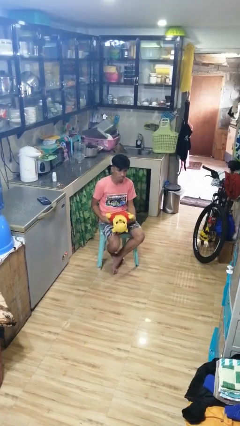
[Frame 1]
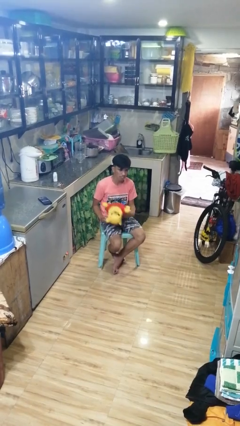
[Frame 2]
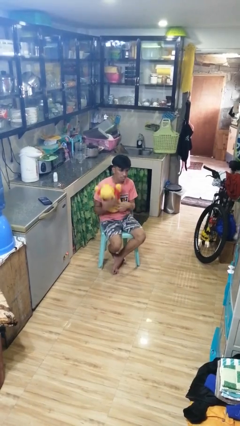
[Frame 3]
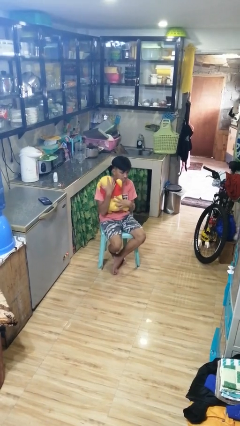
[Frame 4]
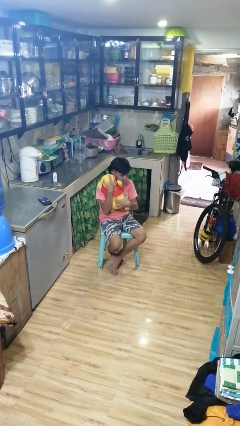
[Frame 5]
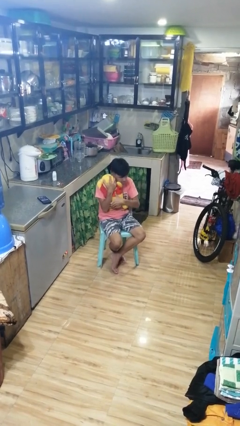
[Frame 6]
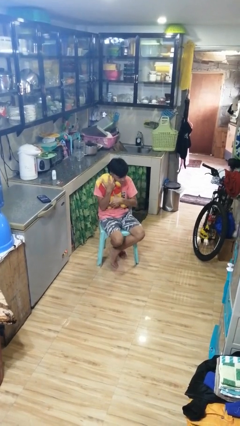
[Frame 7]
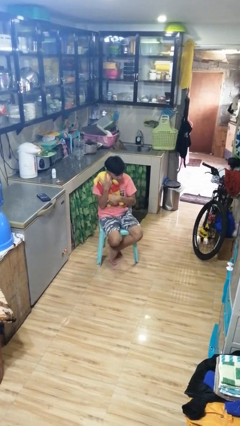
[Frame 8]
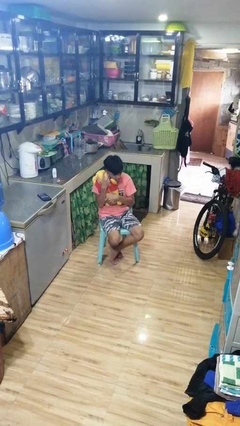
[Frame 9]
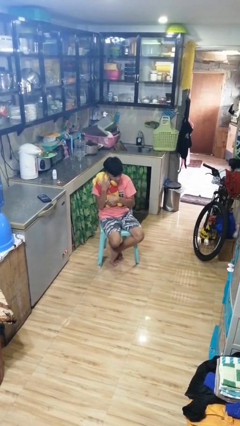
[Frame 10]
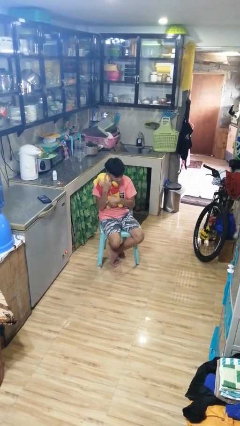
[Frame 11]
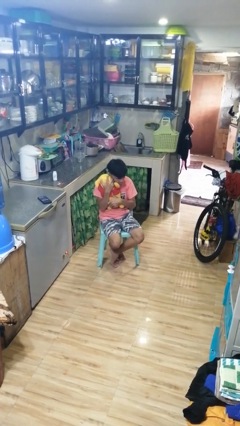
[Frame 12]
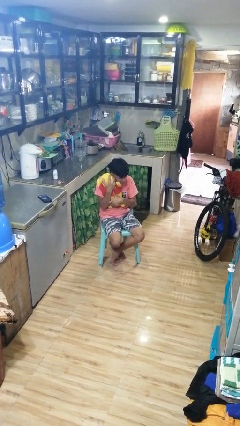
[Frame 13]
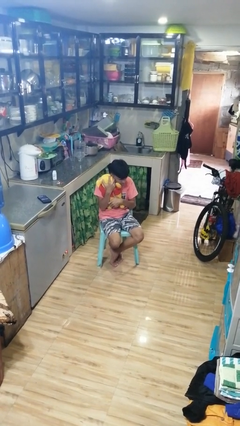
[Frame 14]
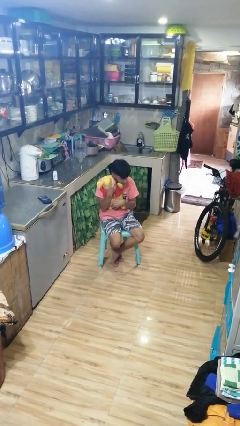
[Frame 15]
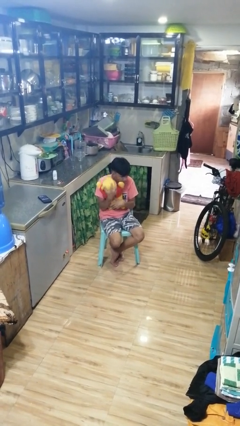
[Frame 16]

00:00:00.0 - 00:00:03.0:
person hugs stuffed animal

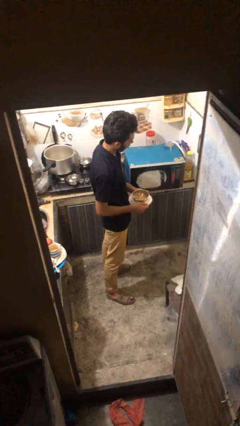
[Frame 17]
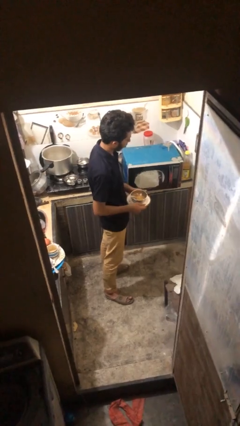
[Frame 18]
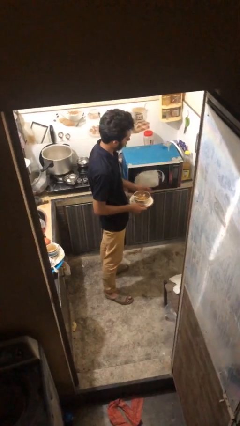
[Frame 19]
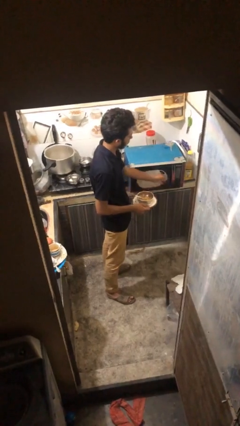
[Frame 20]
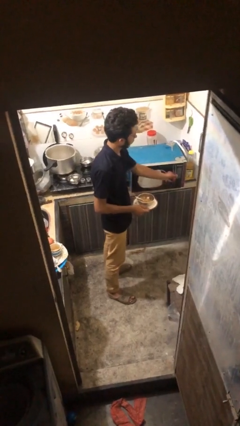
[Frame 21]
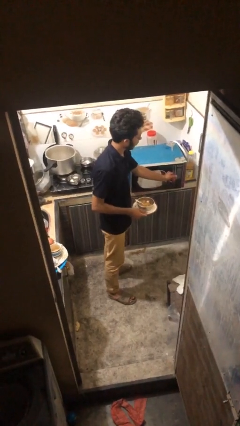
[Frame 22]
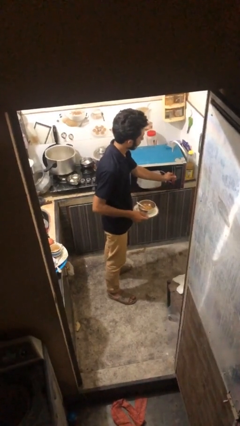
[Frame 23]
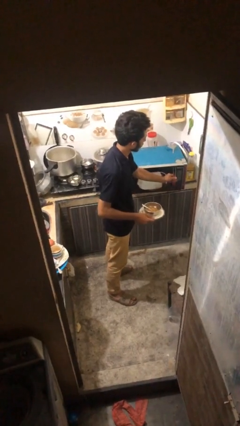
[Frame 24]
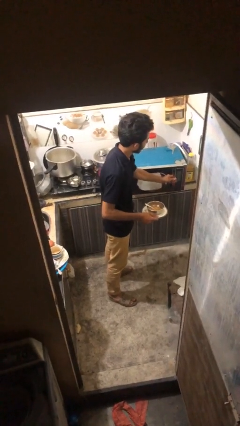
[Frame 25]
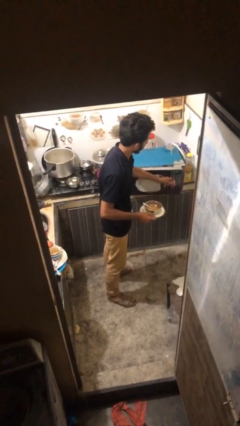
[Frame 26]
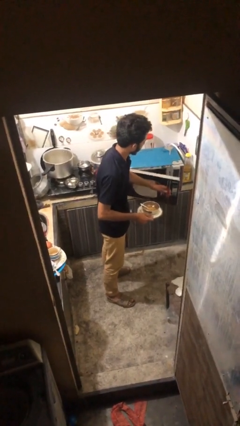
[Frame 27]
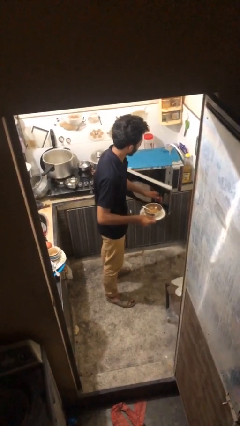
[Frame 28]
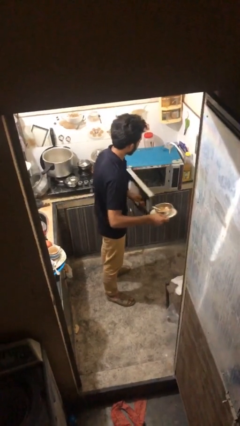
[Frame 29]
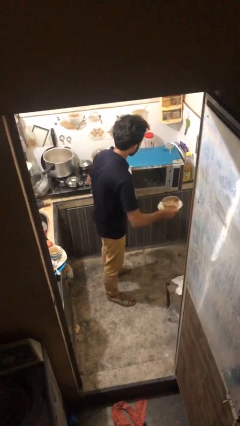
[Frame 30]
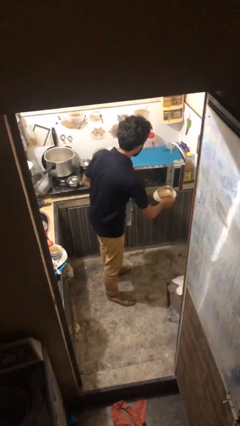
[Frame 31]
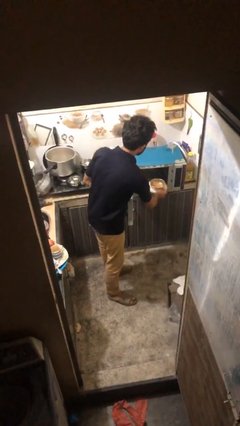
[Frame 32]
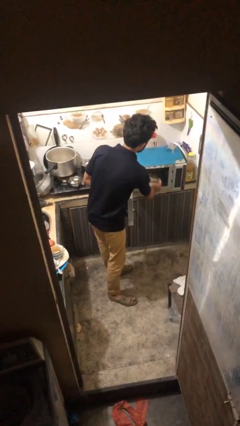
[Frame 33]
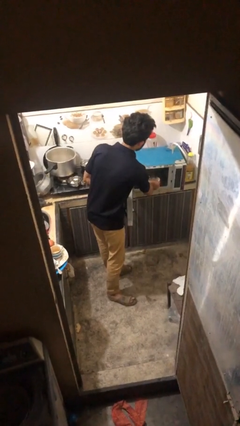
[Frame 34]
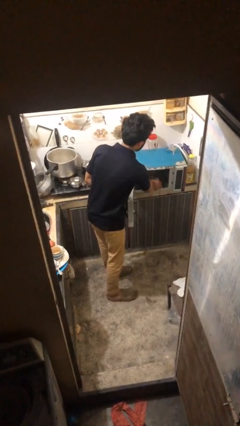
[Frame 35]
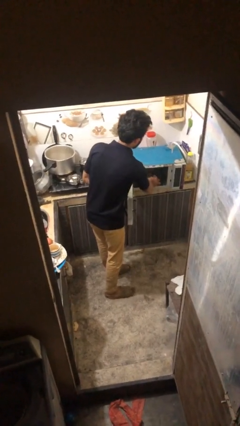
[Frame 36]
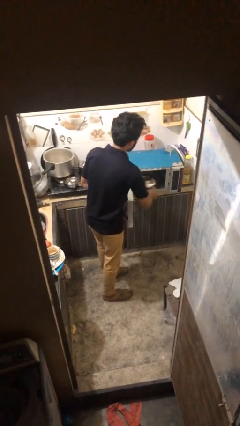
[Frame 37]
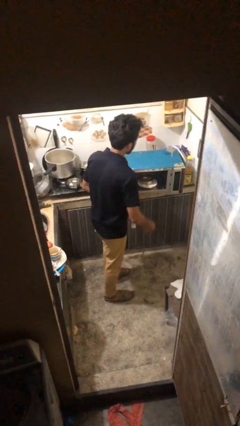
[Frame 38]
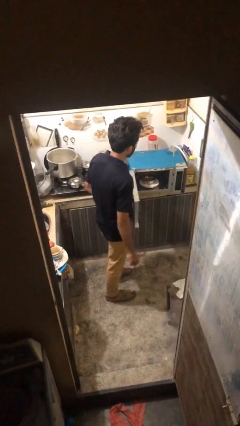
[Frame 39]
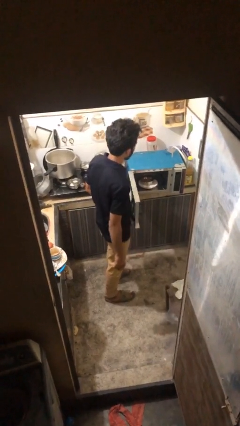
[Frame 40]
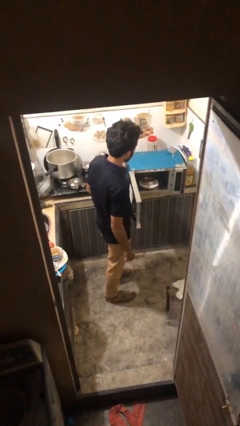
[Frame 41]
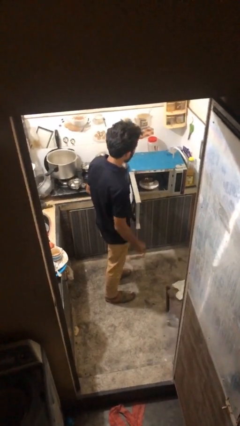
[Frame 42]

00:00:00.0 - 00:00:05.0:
person puts object into microwave

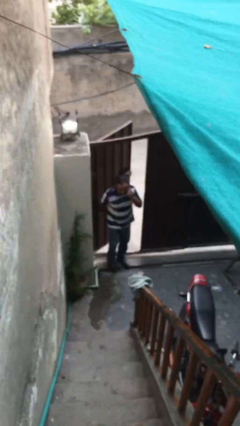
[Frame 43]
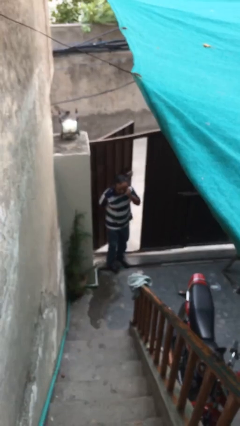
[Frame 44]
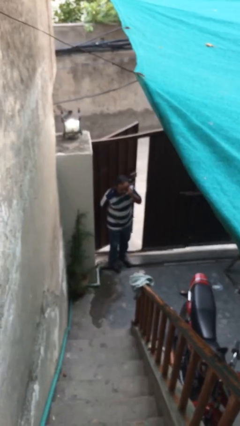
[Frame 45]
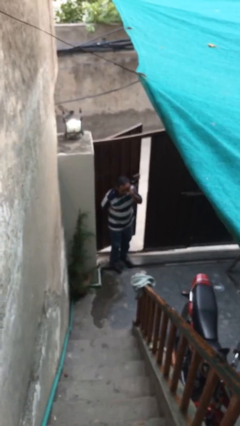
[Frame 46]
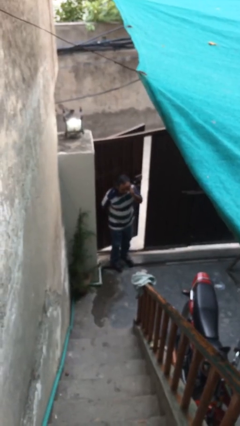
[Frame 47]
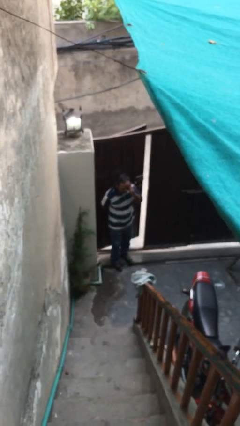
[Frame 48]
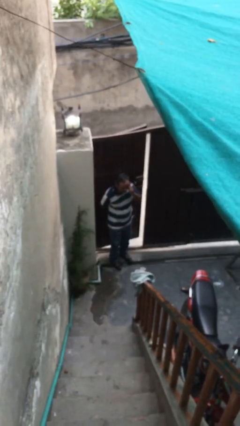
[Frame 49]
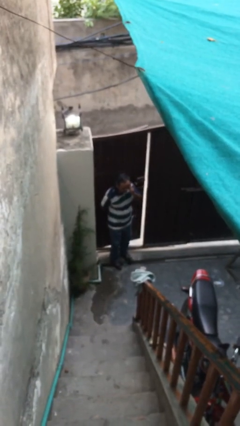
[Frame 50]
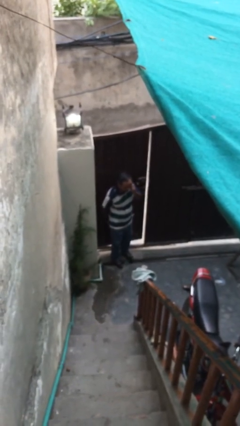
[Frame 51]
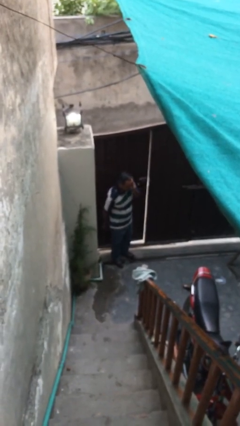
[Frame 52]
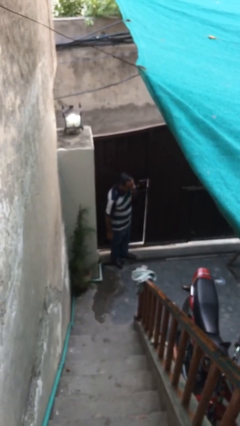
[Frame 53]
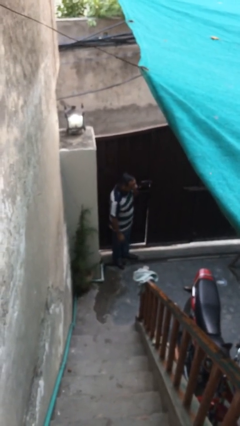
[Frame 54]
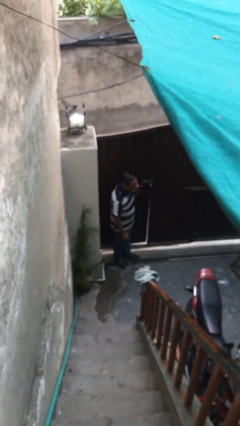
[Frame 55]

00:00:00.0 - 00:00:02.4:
person closes facility door

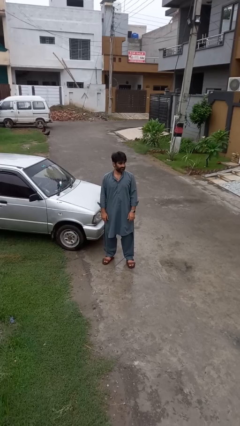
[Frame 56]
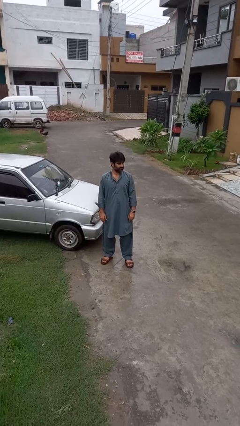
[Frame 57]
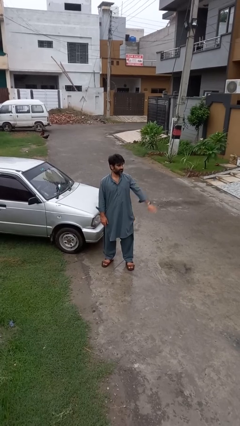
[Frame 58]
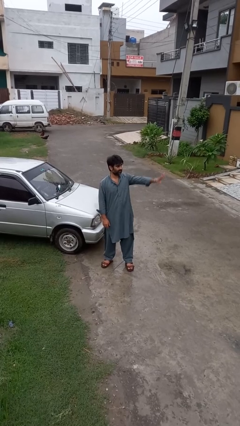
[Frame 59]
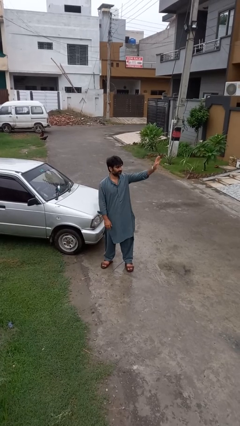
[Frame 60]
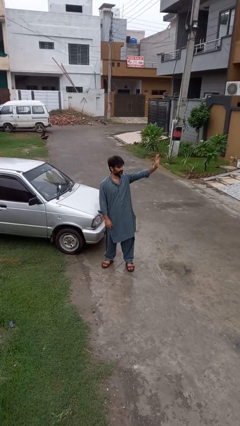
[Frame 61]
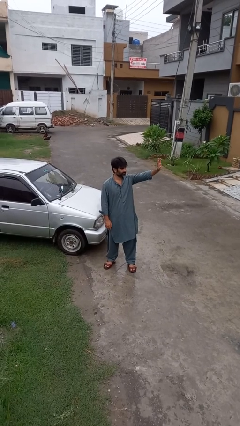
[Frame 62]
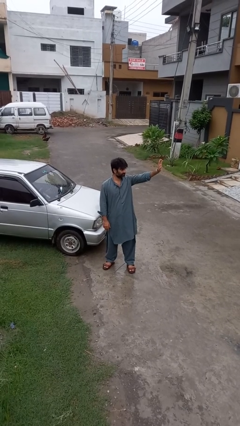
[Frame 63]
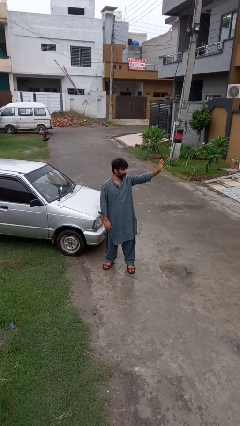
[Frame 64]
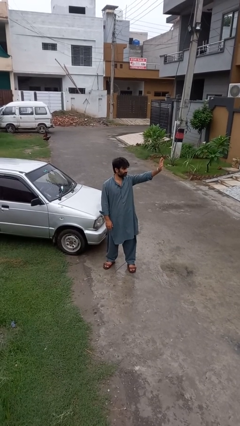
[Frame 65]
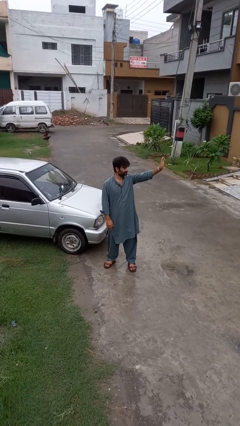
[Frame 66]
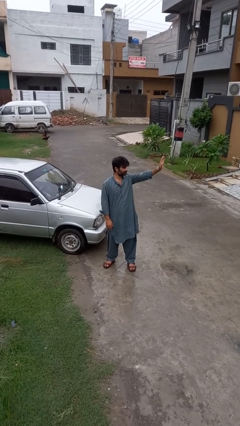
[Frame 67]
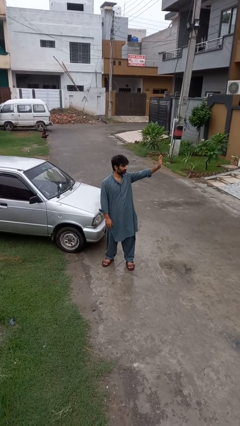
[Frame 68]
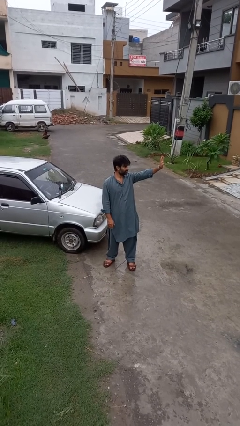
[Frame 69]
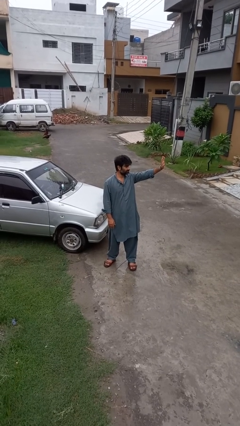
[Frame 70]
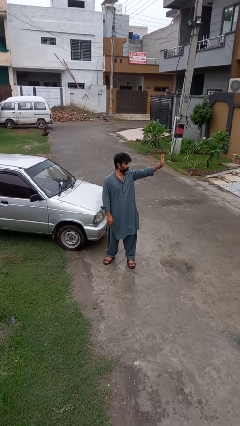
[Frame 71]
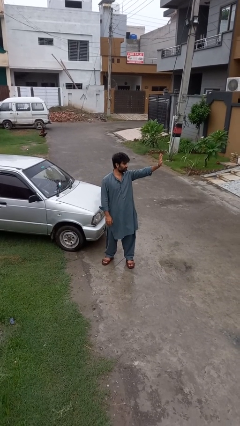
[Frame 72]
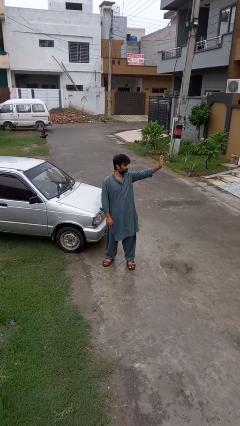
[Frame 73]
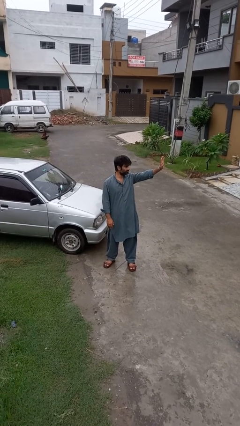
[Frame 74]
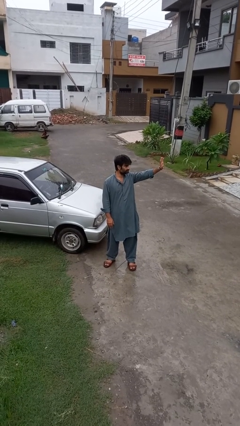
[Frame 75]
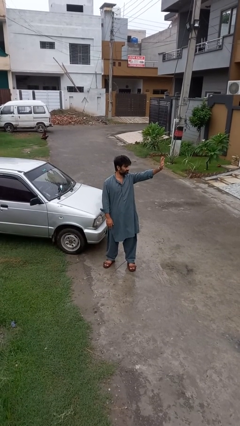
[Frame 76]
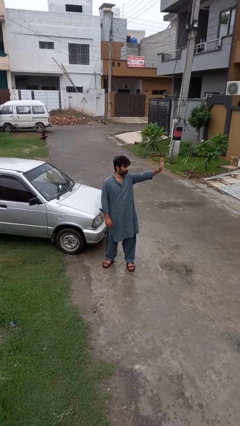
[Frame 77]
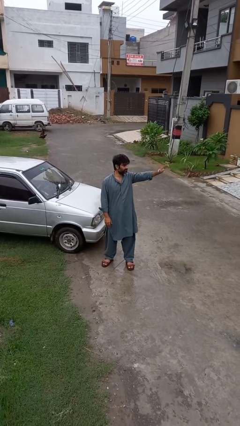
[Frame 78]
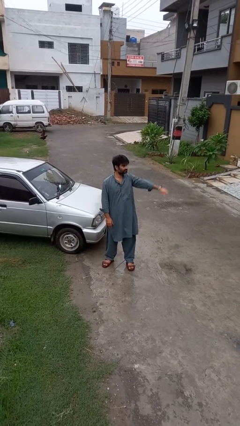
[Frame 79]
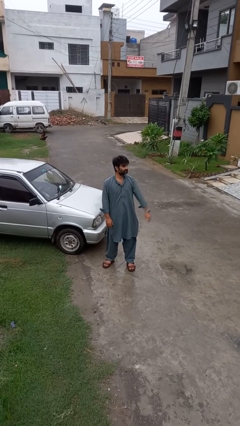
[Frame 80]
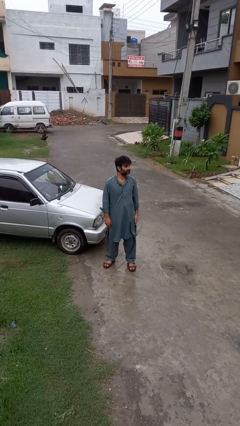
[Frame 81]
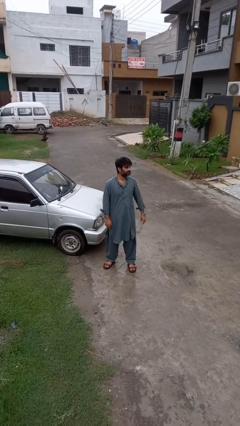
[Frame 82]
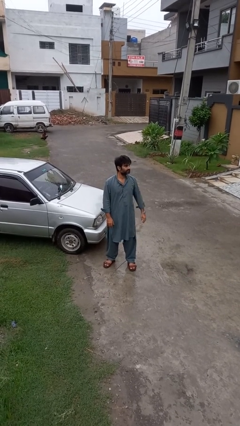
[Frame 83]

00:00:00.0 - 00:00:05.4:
person waves at person

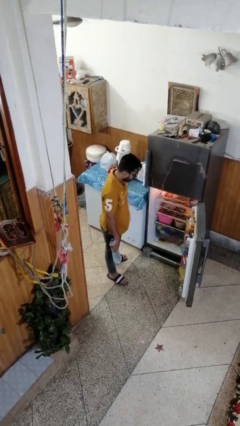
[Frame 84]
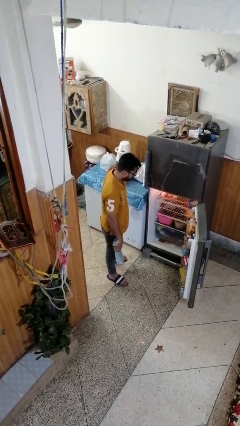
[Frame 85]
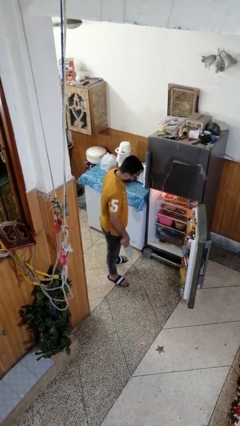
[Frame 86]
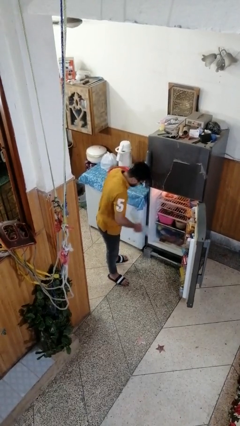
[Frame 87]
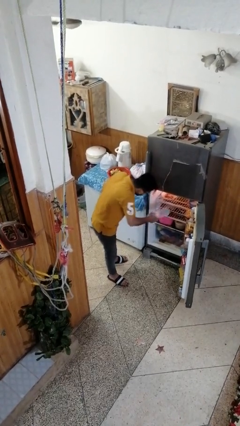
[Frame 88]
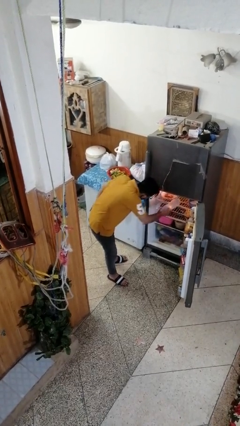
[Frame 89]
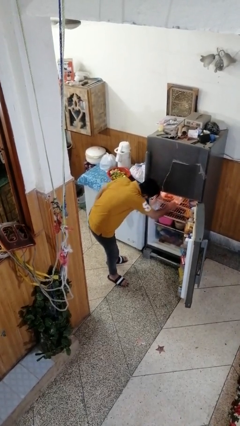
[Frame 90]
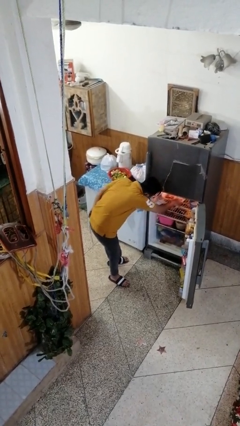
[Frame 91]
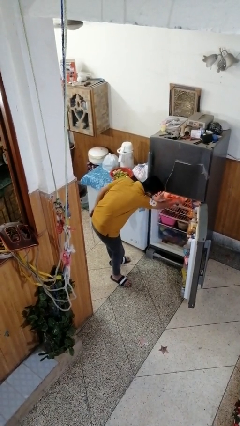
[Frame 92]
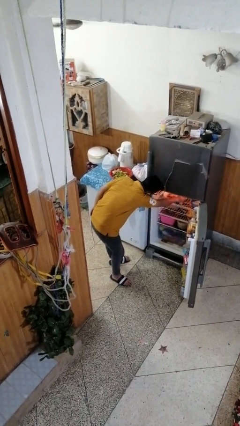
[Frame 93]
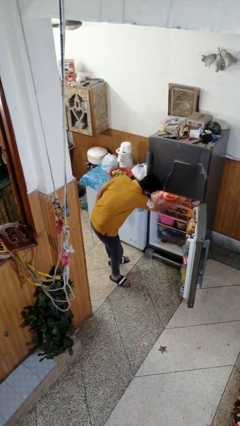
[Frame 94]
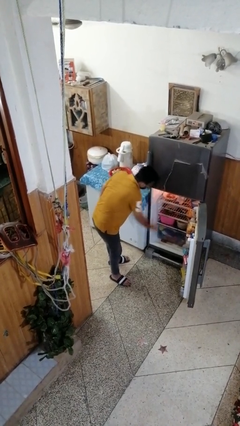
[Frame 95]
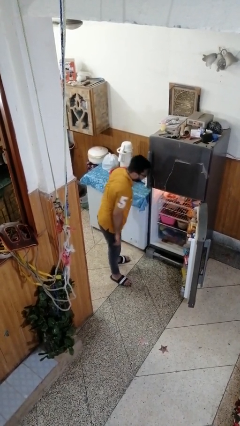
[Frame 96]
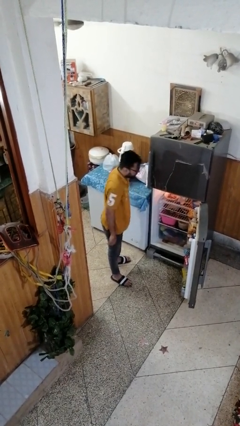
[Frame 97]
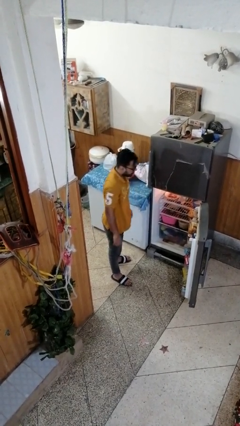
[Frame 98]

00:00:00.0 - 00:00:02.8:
person puts object into refrigerator
